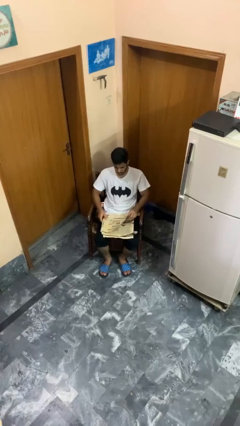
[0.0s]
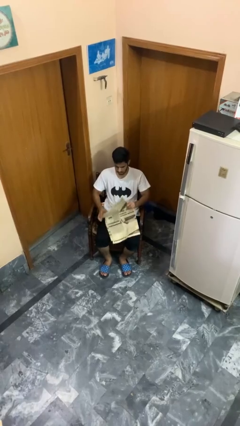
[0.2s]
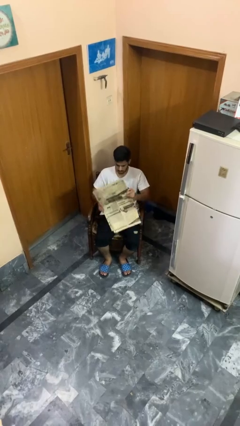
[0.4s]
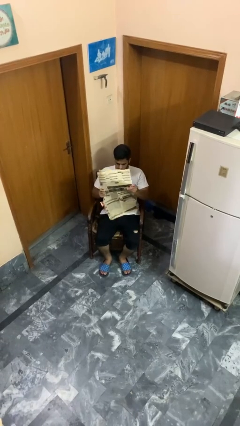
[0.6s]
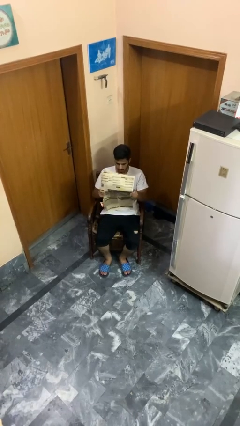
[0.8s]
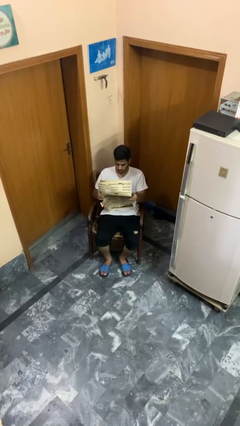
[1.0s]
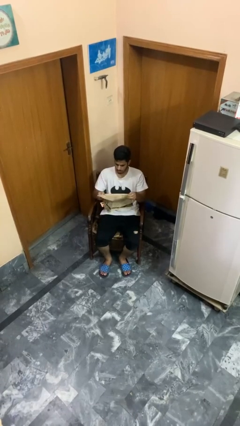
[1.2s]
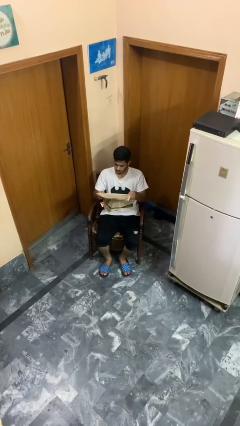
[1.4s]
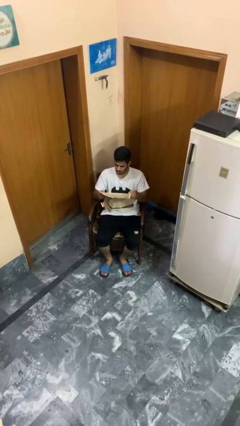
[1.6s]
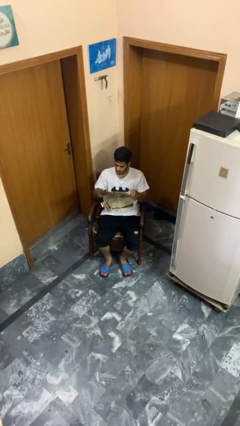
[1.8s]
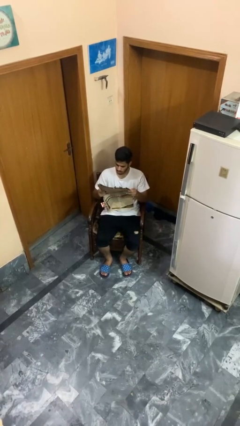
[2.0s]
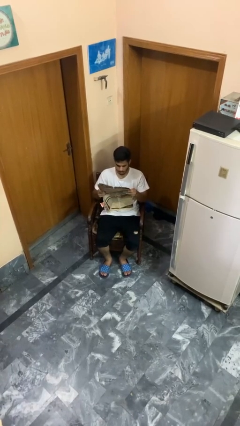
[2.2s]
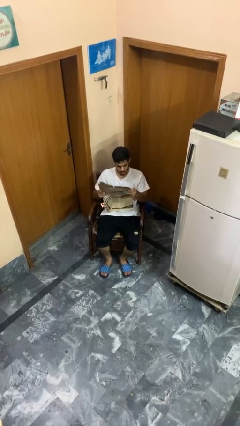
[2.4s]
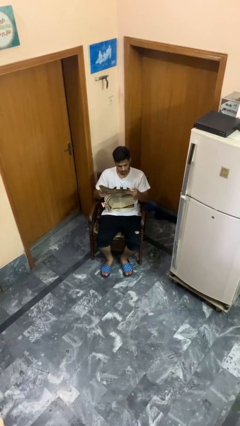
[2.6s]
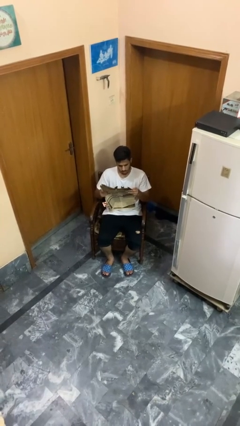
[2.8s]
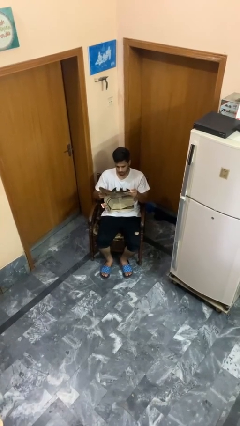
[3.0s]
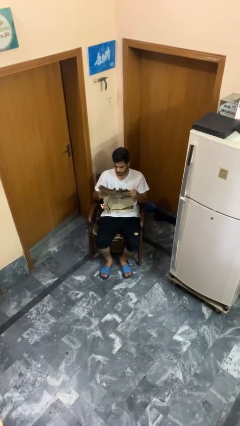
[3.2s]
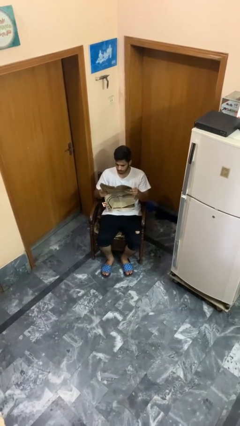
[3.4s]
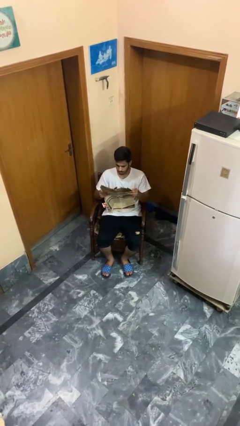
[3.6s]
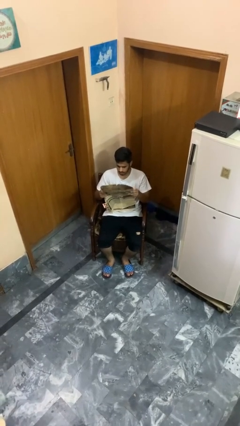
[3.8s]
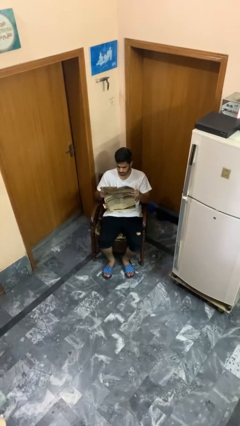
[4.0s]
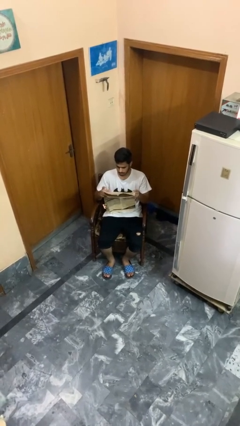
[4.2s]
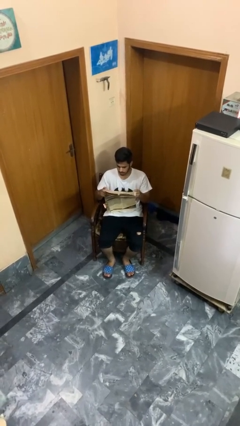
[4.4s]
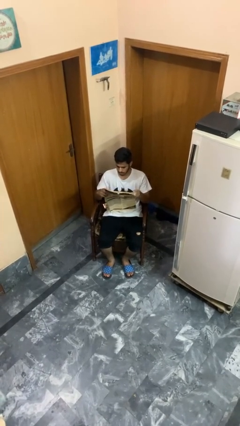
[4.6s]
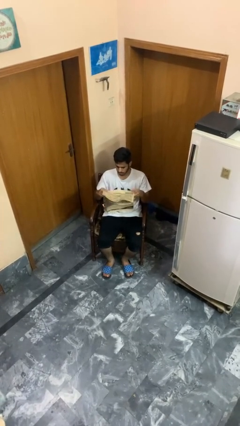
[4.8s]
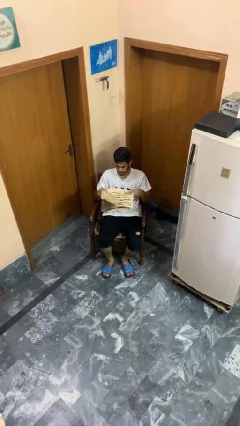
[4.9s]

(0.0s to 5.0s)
person reads newspaper

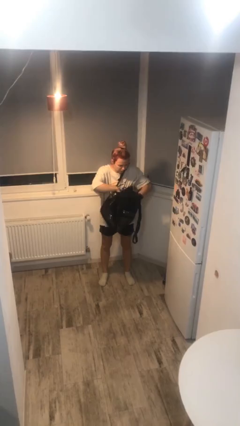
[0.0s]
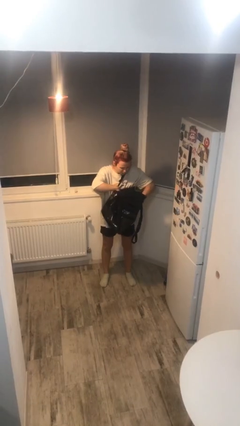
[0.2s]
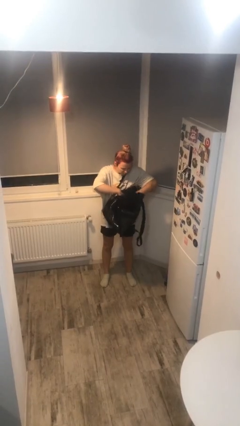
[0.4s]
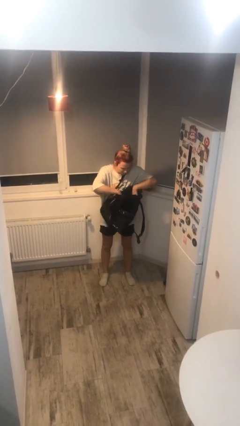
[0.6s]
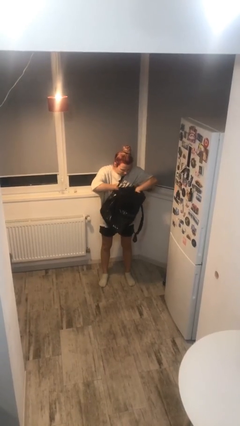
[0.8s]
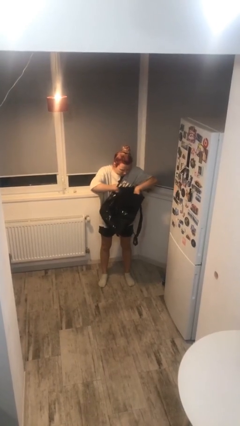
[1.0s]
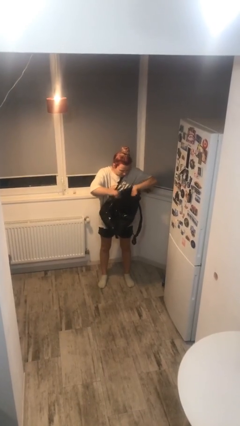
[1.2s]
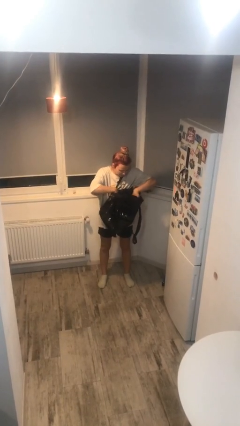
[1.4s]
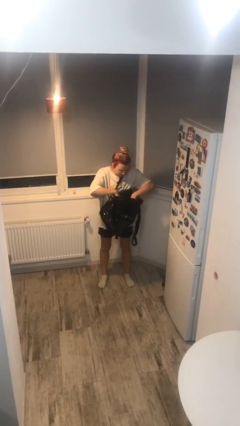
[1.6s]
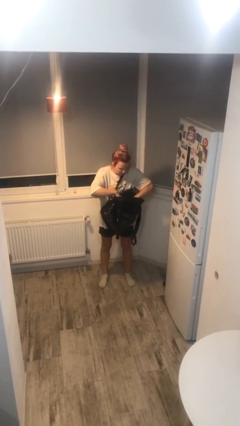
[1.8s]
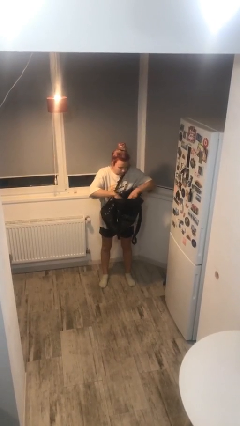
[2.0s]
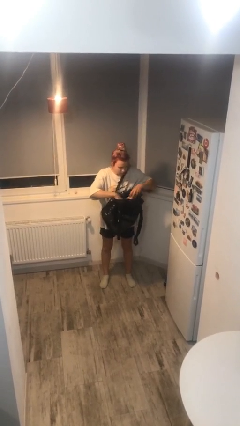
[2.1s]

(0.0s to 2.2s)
person searches in backpack

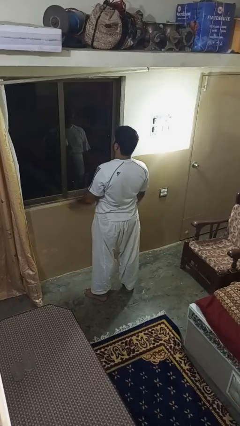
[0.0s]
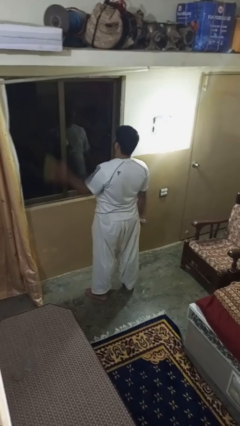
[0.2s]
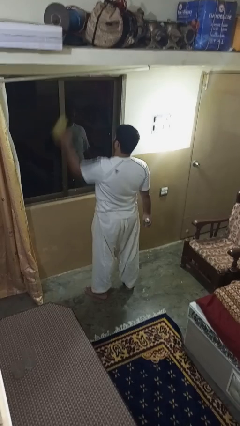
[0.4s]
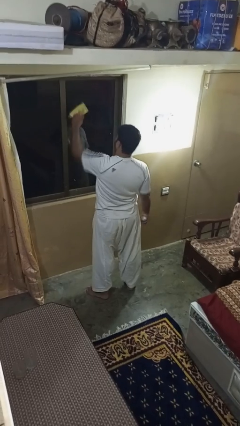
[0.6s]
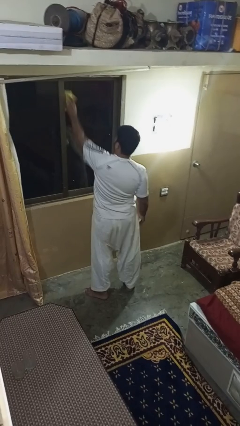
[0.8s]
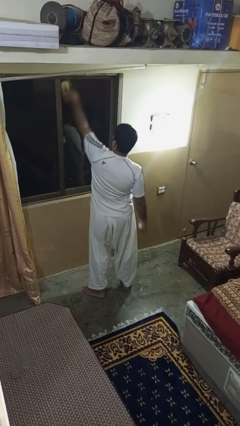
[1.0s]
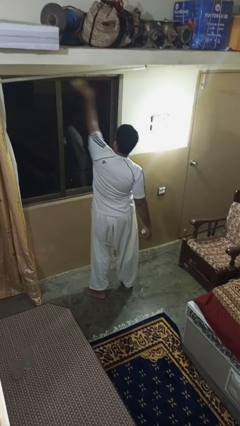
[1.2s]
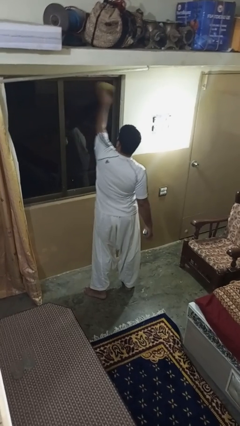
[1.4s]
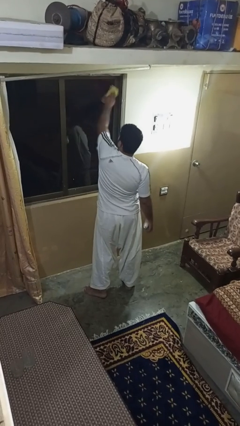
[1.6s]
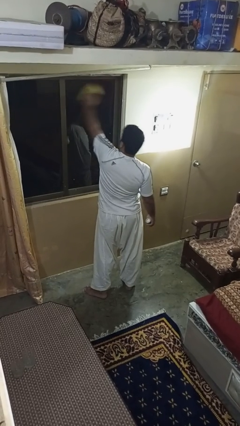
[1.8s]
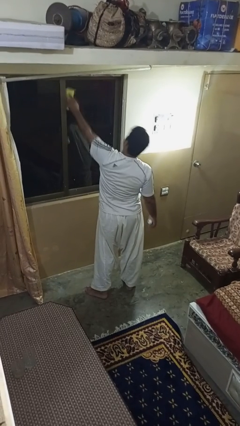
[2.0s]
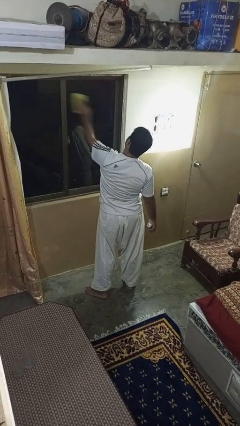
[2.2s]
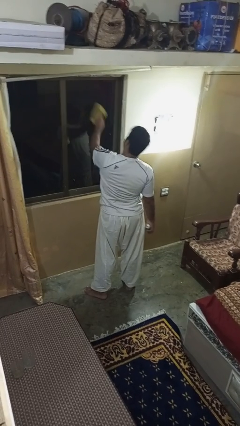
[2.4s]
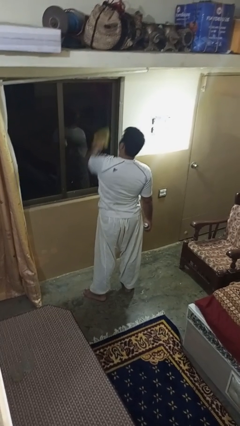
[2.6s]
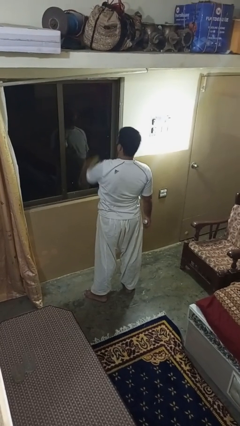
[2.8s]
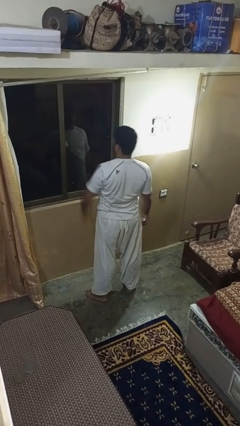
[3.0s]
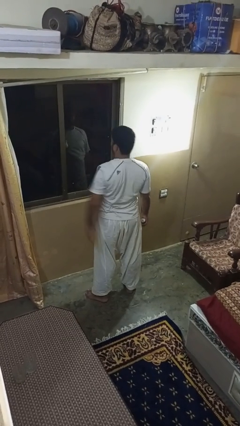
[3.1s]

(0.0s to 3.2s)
person washes window

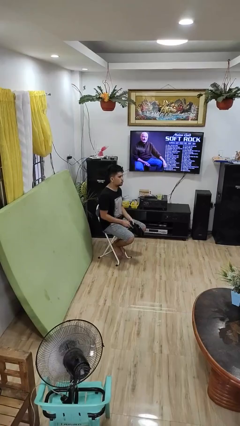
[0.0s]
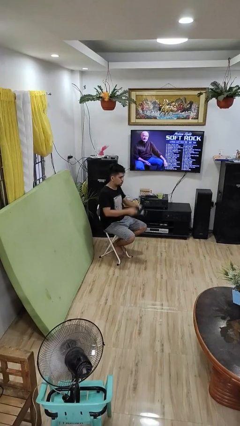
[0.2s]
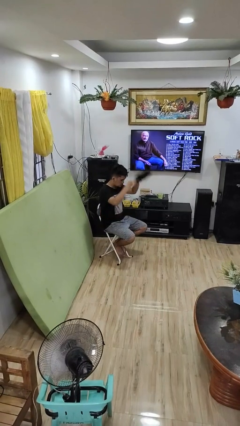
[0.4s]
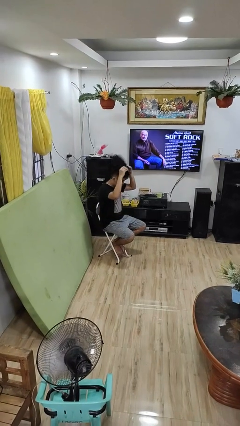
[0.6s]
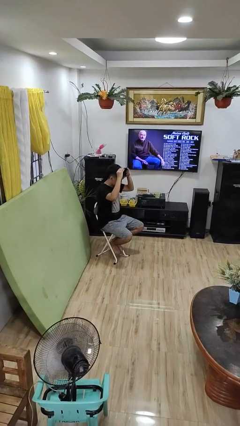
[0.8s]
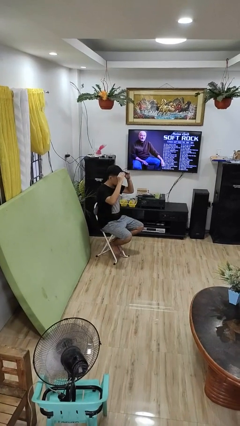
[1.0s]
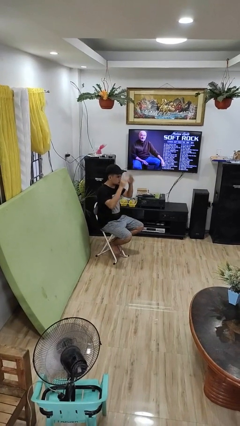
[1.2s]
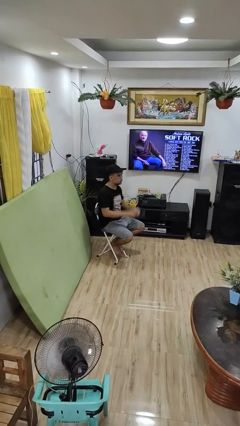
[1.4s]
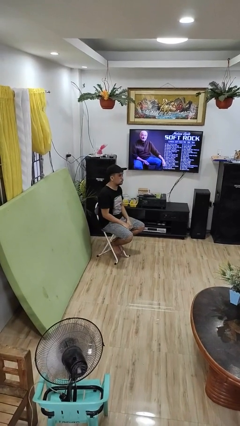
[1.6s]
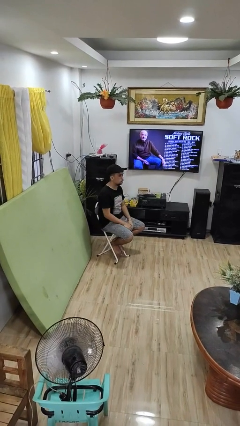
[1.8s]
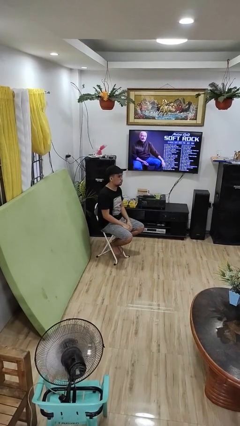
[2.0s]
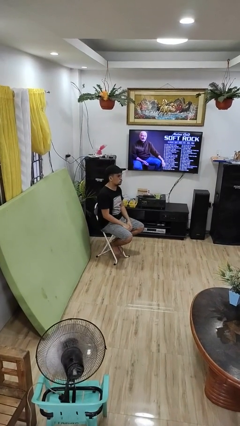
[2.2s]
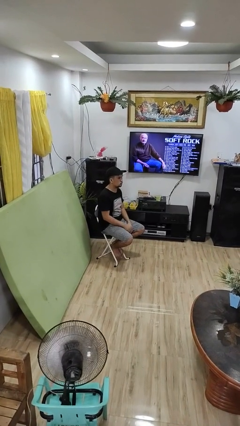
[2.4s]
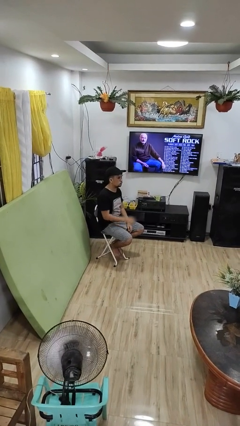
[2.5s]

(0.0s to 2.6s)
person puts on hat

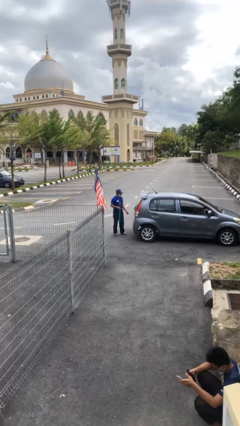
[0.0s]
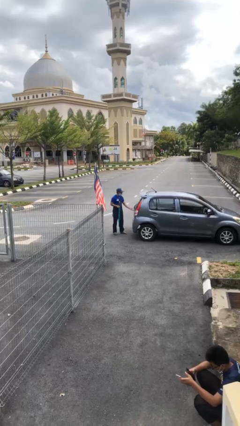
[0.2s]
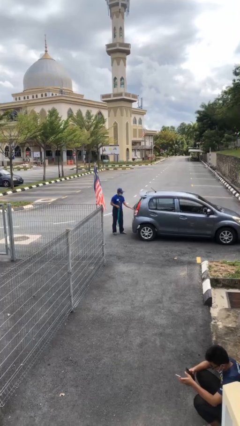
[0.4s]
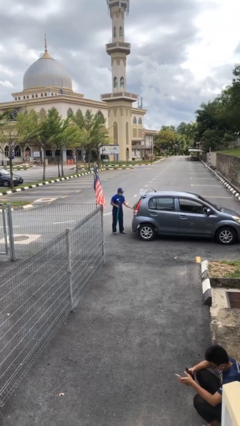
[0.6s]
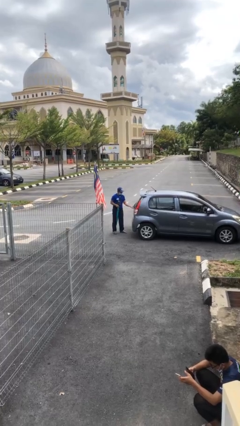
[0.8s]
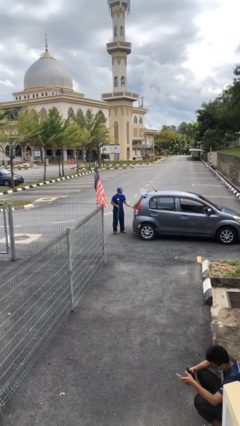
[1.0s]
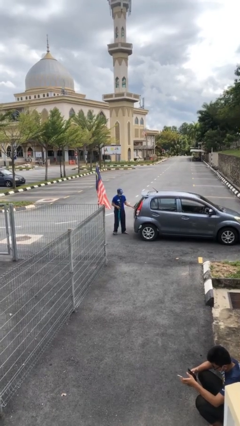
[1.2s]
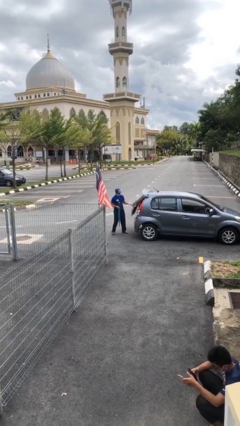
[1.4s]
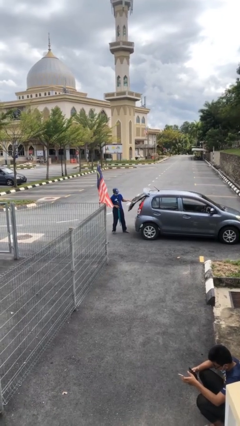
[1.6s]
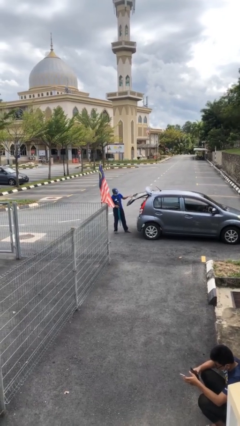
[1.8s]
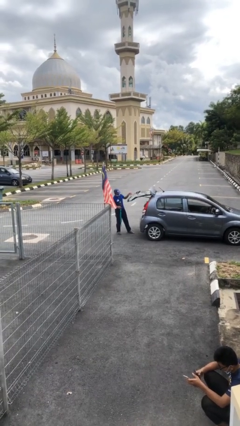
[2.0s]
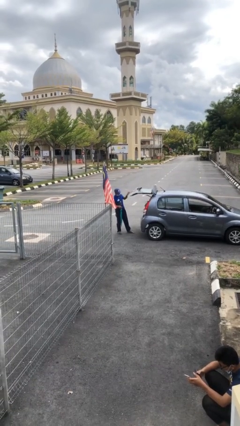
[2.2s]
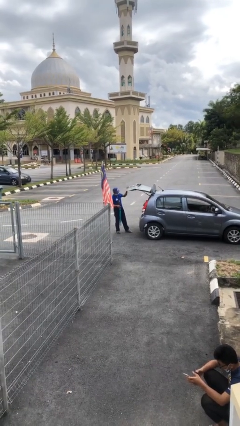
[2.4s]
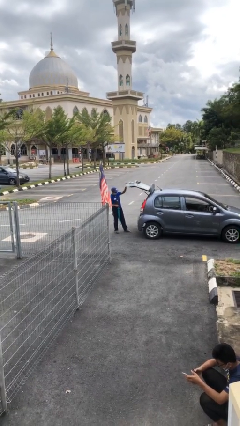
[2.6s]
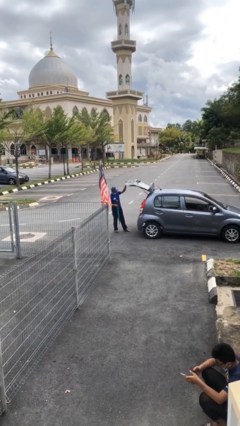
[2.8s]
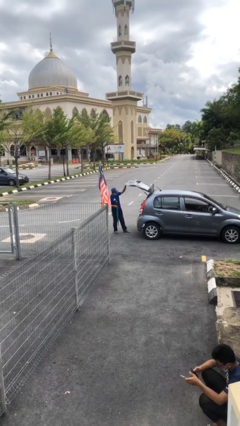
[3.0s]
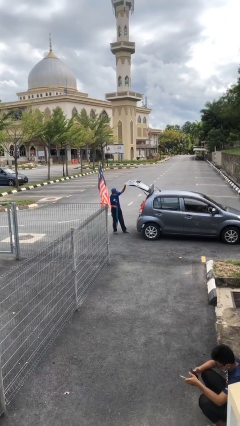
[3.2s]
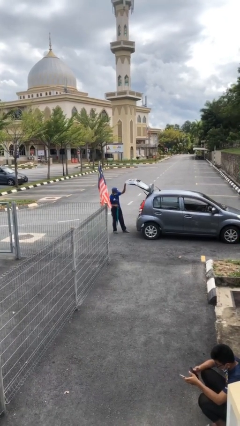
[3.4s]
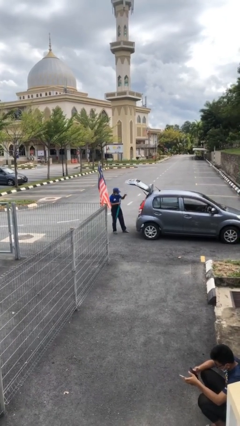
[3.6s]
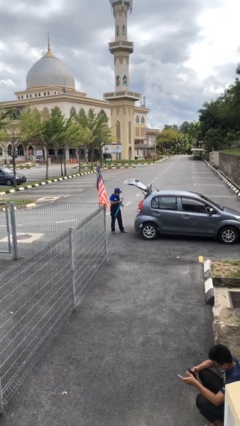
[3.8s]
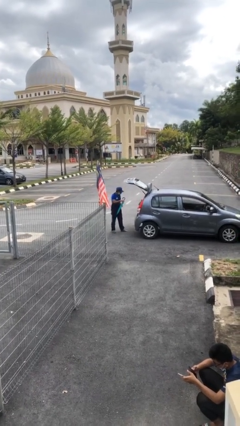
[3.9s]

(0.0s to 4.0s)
person opens car trunk

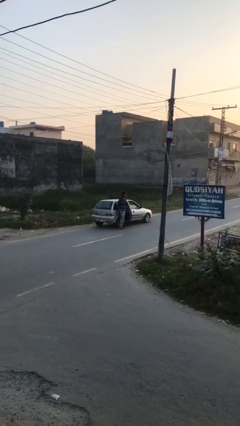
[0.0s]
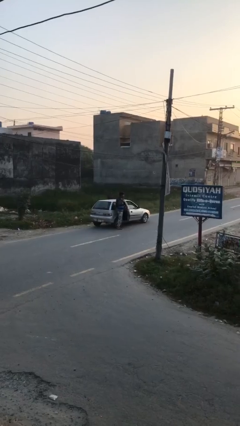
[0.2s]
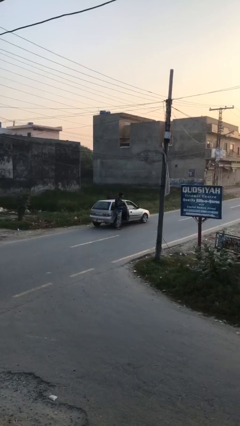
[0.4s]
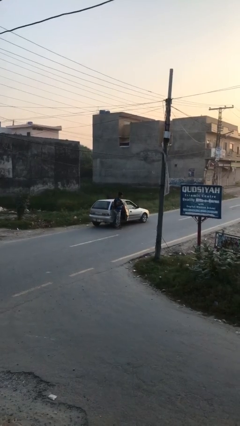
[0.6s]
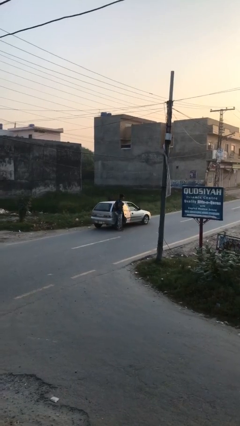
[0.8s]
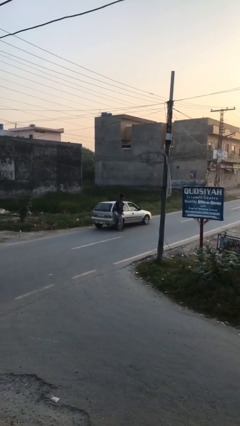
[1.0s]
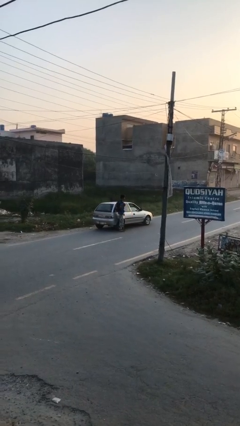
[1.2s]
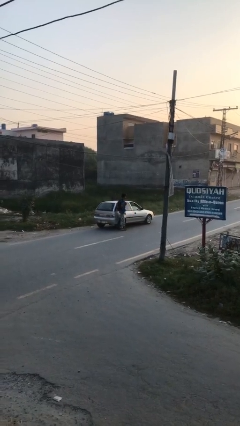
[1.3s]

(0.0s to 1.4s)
person closes car door
